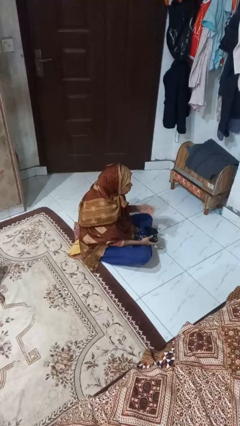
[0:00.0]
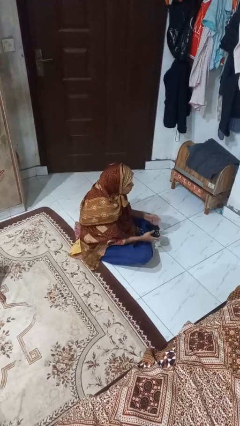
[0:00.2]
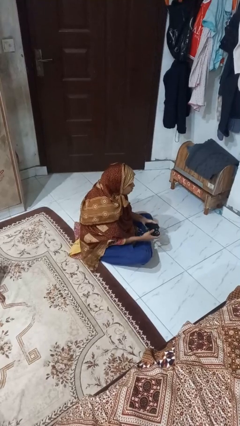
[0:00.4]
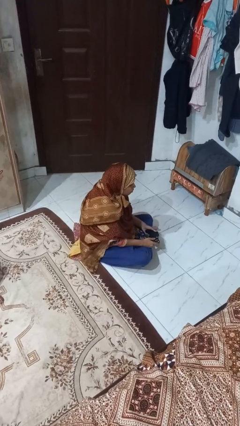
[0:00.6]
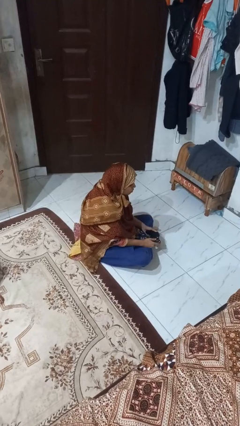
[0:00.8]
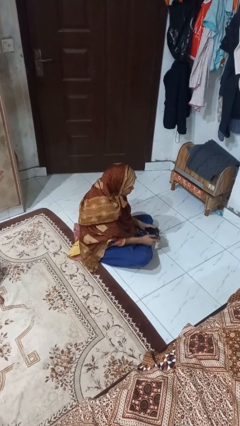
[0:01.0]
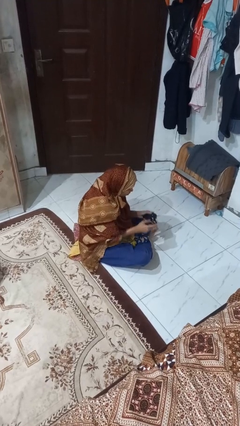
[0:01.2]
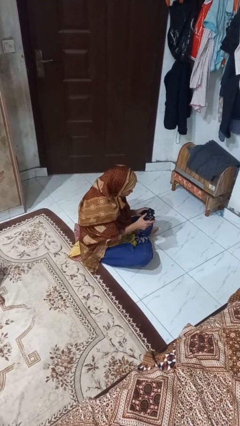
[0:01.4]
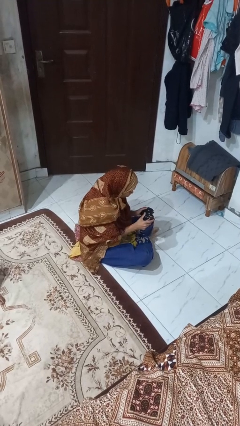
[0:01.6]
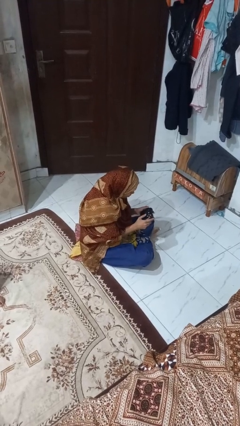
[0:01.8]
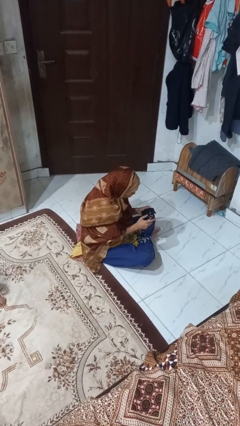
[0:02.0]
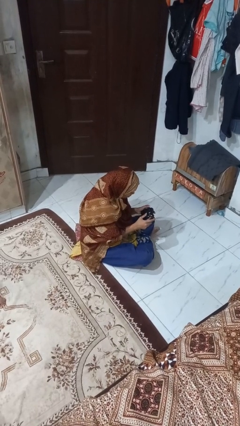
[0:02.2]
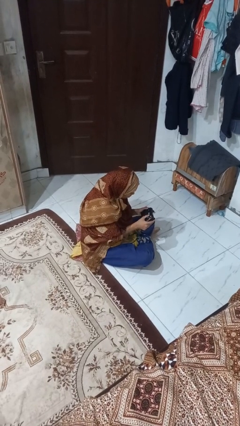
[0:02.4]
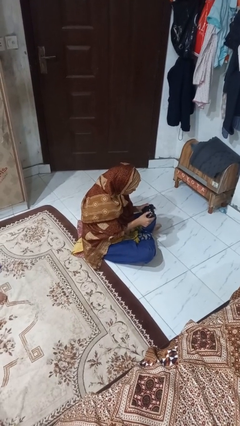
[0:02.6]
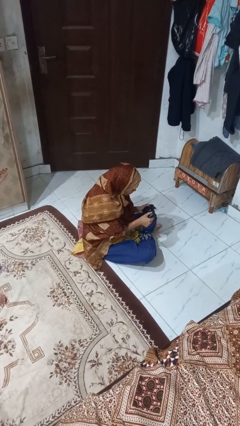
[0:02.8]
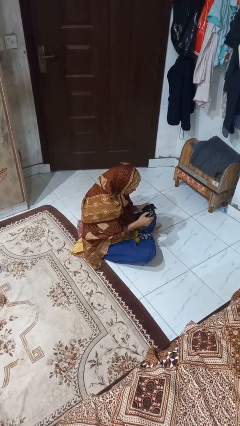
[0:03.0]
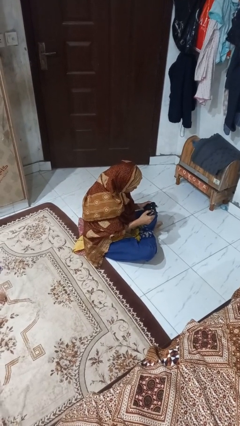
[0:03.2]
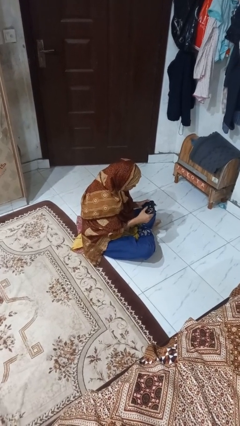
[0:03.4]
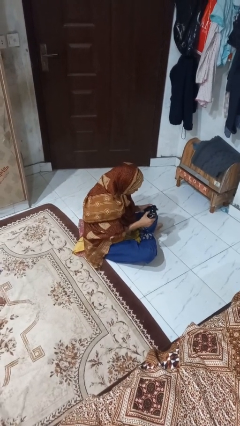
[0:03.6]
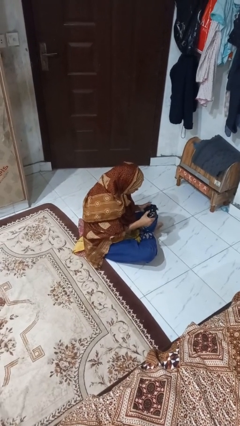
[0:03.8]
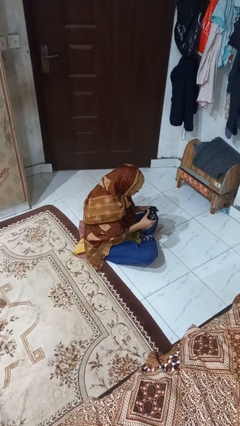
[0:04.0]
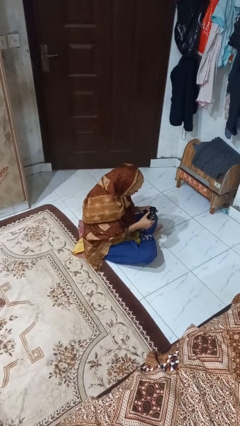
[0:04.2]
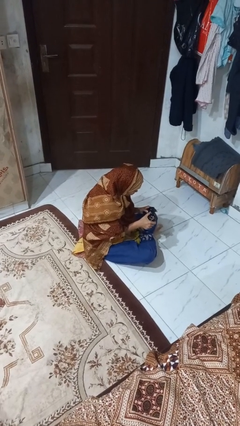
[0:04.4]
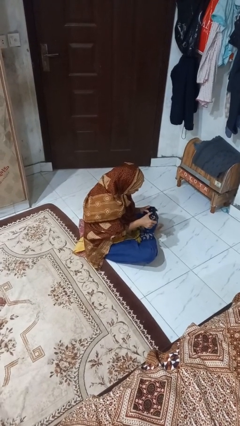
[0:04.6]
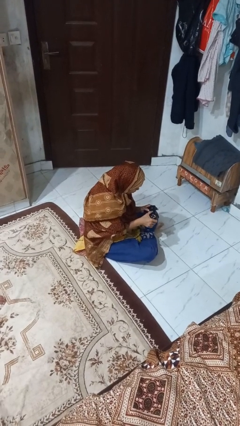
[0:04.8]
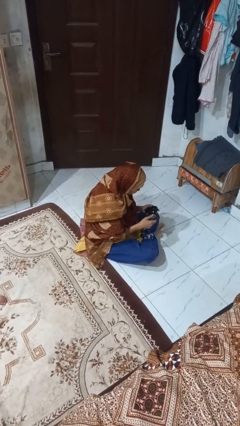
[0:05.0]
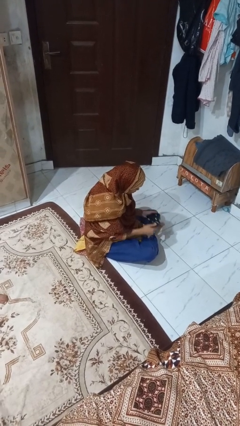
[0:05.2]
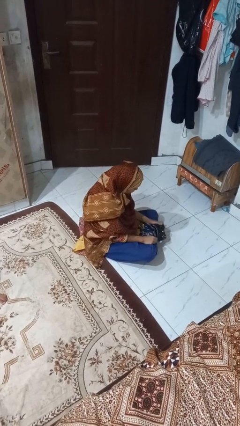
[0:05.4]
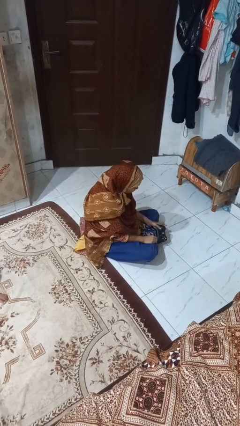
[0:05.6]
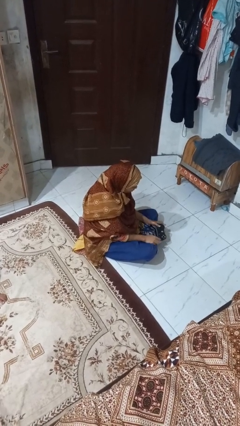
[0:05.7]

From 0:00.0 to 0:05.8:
person interacts with handheld game

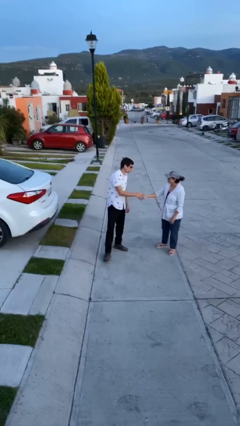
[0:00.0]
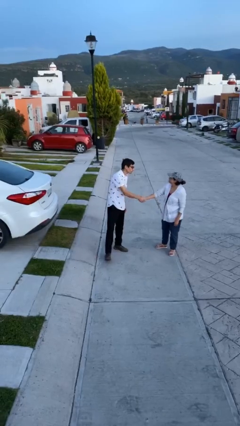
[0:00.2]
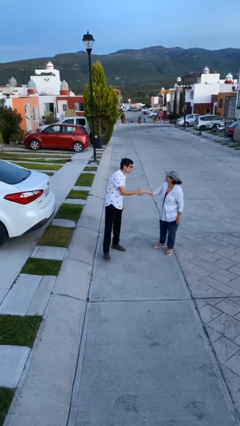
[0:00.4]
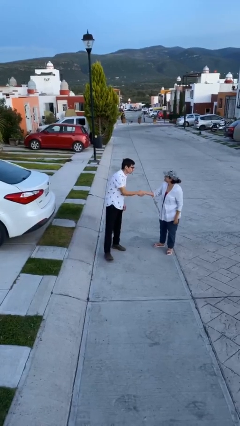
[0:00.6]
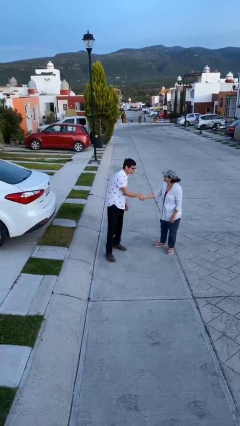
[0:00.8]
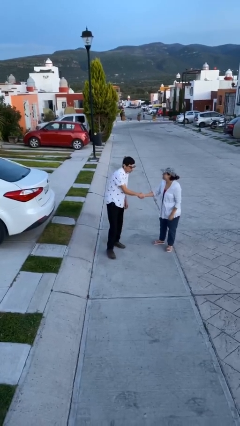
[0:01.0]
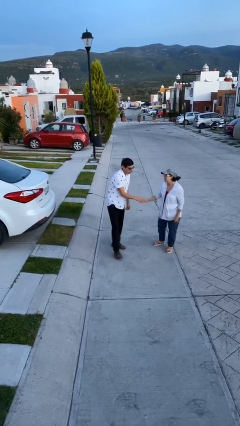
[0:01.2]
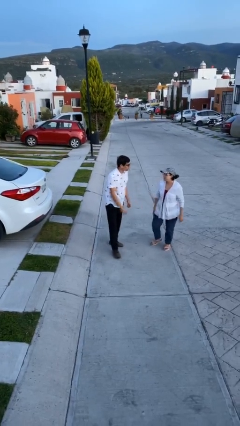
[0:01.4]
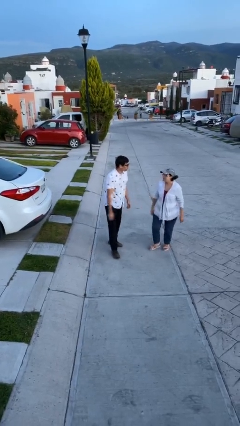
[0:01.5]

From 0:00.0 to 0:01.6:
person shakes hand

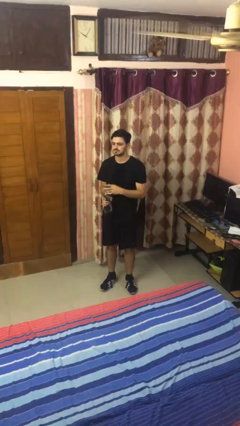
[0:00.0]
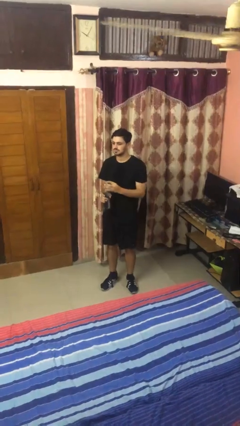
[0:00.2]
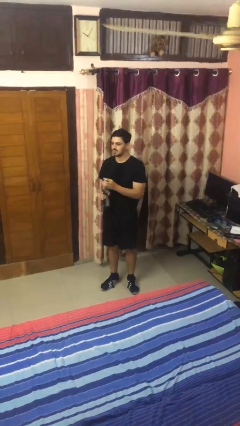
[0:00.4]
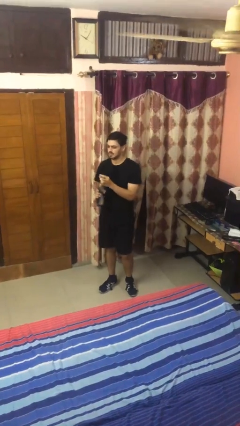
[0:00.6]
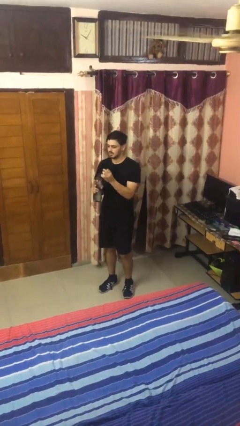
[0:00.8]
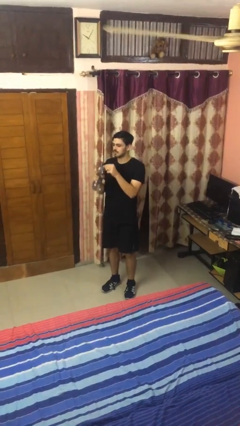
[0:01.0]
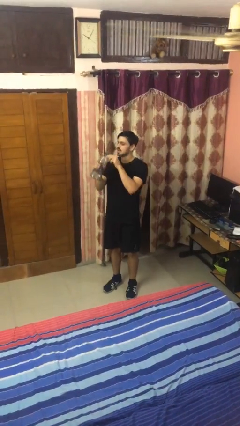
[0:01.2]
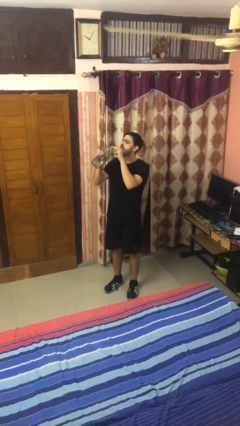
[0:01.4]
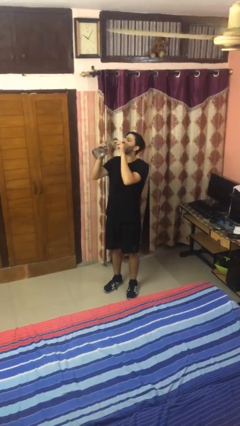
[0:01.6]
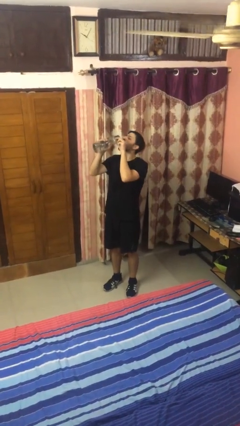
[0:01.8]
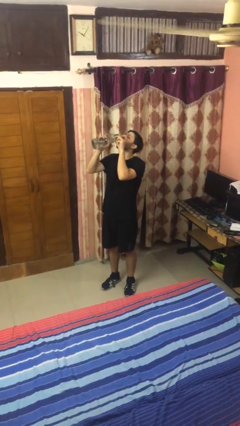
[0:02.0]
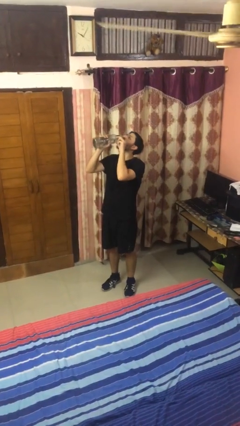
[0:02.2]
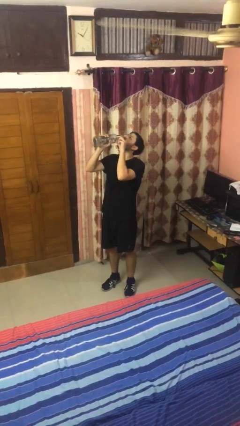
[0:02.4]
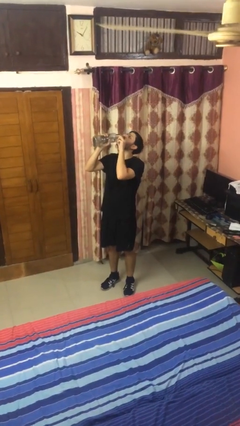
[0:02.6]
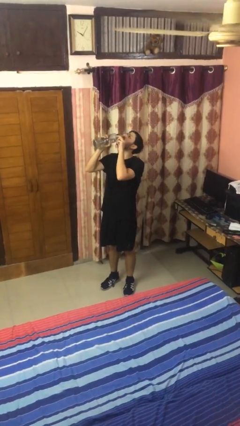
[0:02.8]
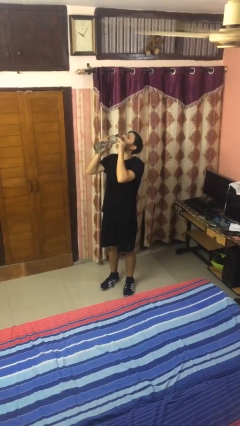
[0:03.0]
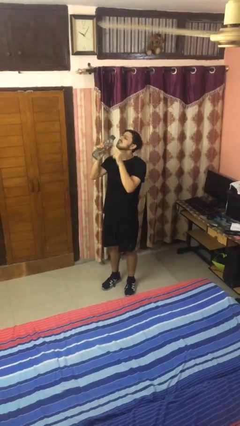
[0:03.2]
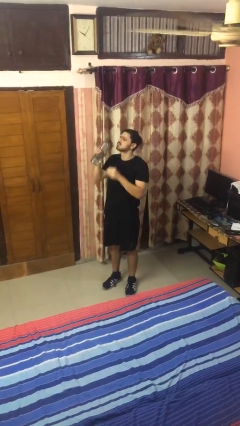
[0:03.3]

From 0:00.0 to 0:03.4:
person drinks from bottle

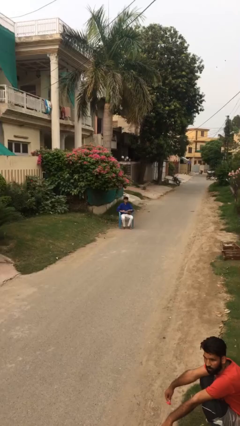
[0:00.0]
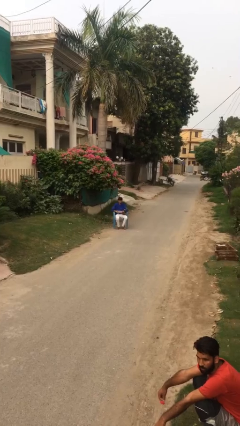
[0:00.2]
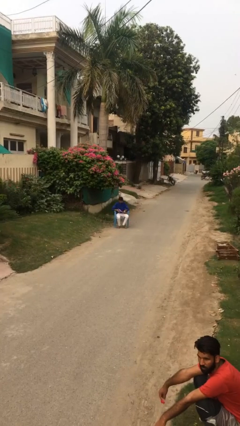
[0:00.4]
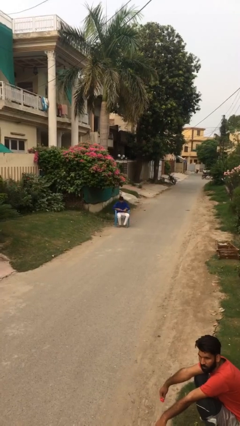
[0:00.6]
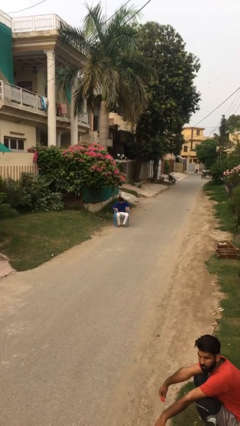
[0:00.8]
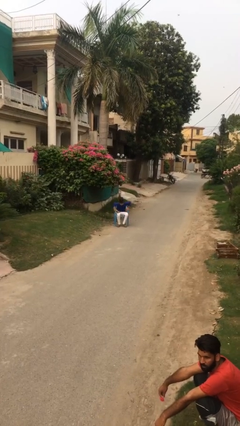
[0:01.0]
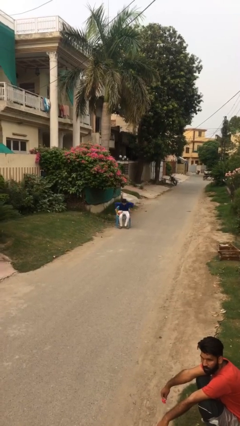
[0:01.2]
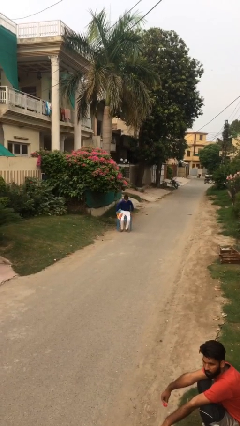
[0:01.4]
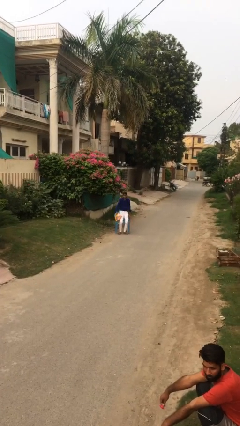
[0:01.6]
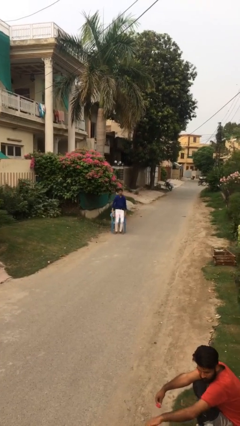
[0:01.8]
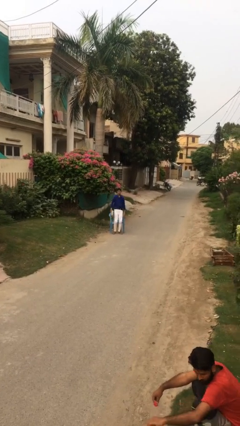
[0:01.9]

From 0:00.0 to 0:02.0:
person stands up

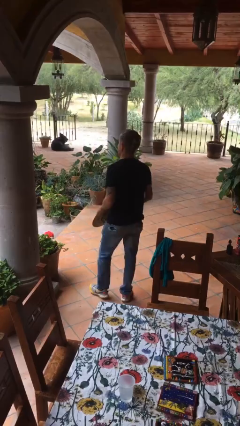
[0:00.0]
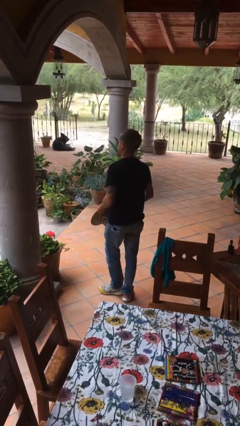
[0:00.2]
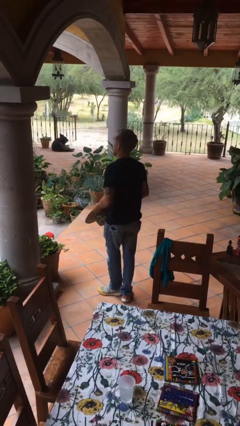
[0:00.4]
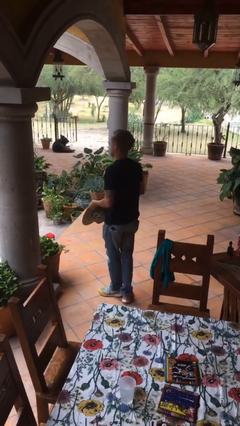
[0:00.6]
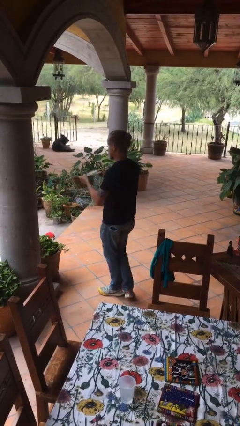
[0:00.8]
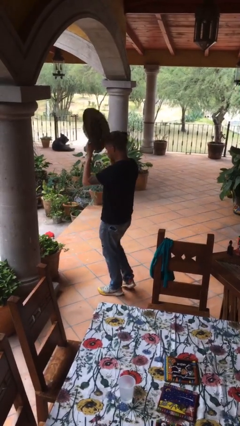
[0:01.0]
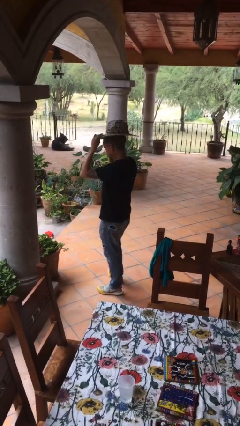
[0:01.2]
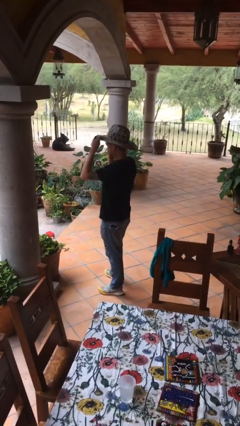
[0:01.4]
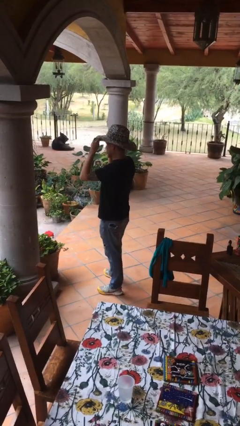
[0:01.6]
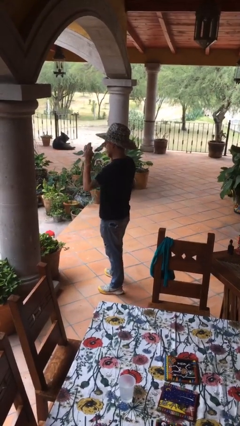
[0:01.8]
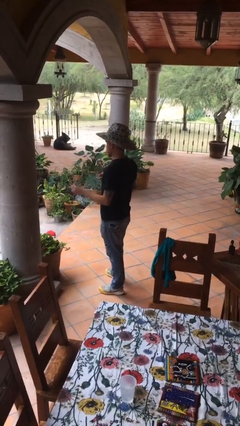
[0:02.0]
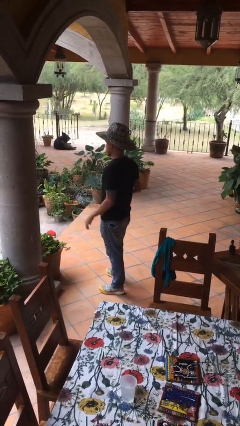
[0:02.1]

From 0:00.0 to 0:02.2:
person puts on hat

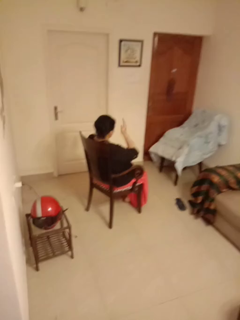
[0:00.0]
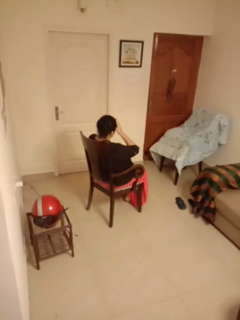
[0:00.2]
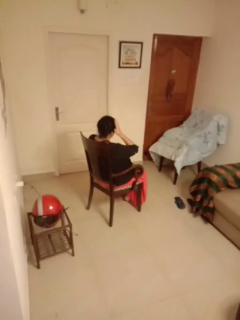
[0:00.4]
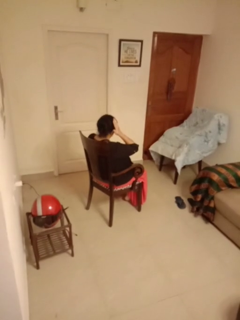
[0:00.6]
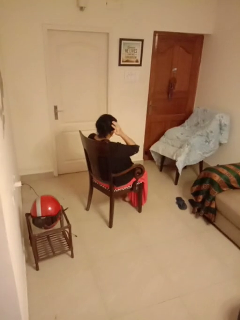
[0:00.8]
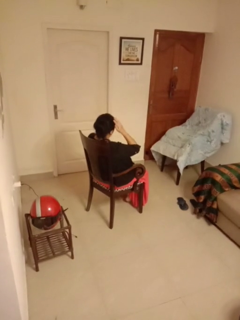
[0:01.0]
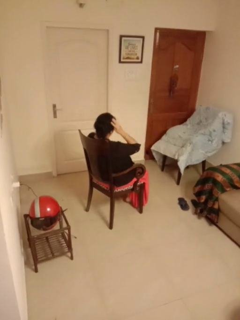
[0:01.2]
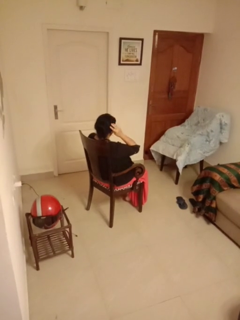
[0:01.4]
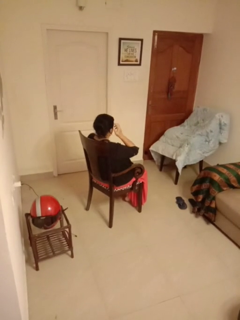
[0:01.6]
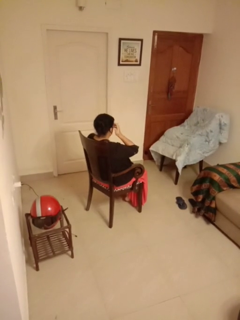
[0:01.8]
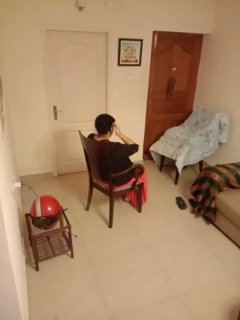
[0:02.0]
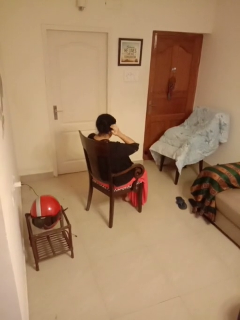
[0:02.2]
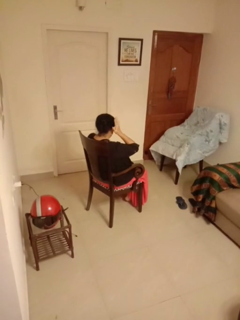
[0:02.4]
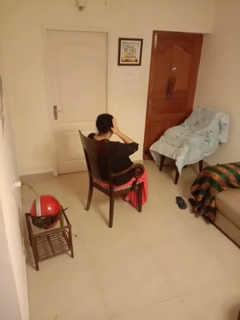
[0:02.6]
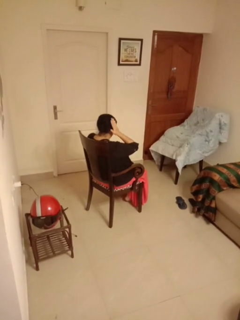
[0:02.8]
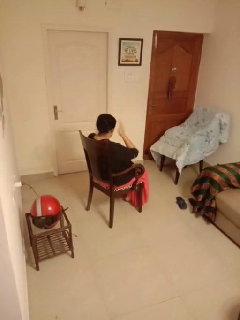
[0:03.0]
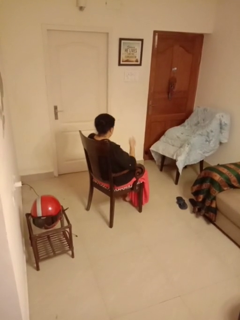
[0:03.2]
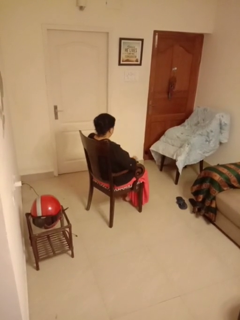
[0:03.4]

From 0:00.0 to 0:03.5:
person strokes hair

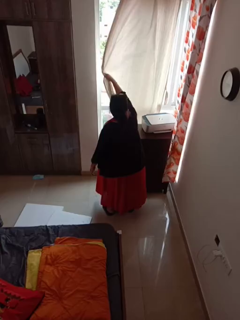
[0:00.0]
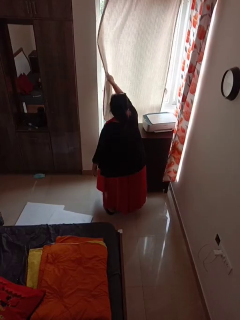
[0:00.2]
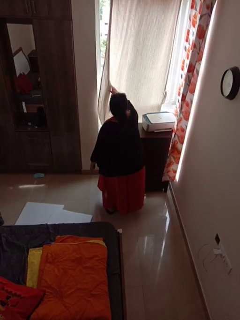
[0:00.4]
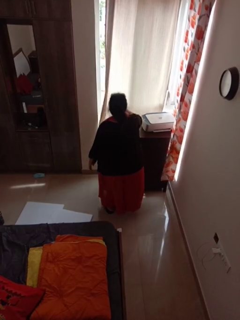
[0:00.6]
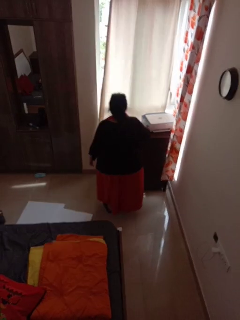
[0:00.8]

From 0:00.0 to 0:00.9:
person closes curtains
